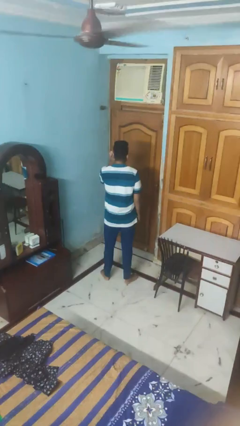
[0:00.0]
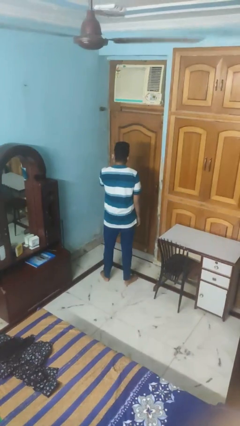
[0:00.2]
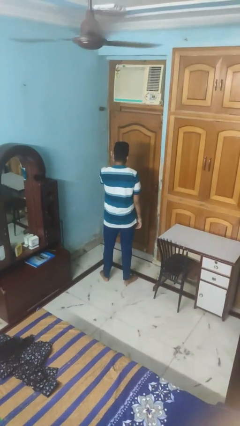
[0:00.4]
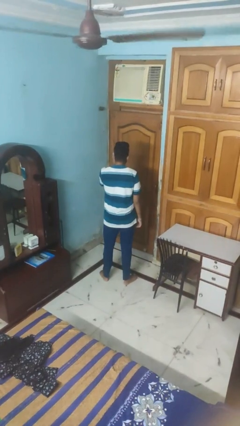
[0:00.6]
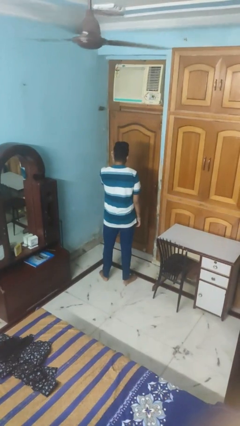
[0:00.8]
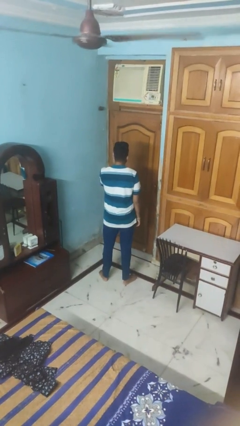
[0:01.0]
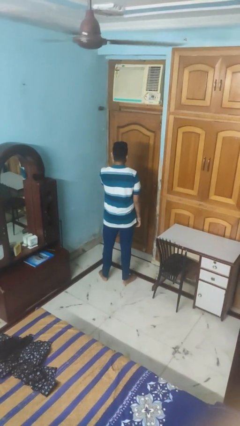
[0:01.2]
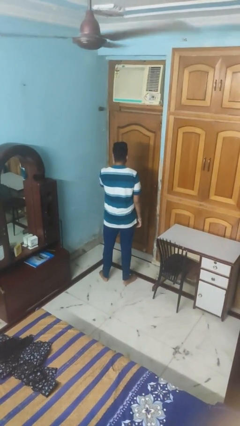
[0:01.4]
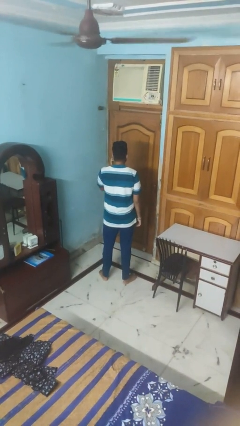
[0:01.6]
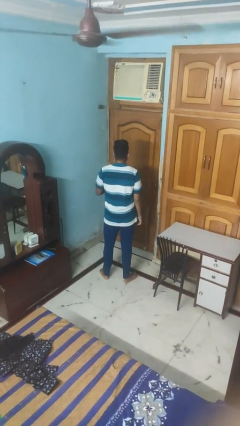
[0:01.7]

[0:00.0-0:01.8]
person touches earlobe

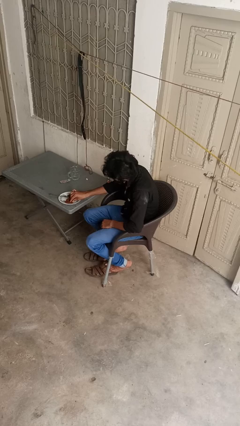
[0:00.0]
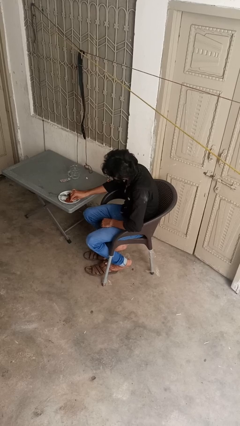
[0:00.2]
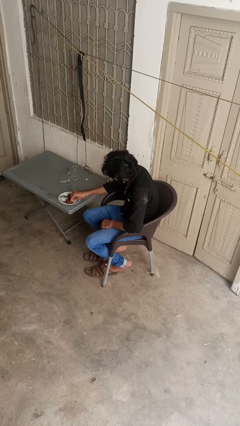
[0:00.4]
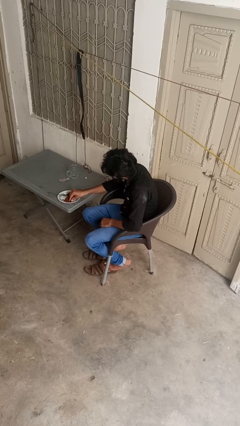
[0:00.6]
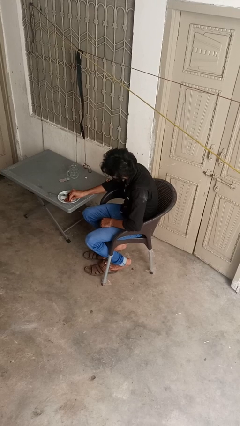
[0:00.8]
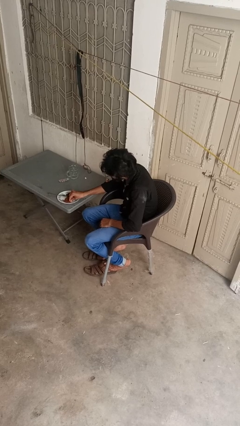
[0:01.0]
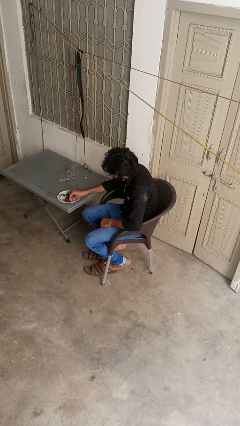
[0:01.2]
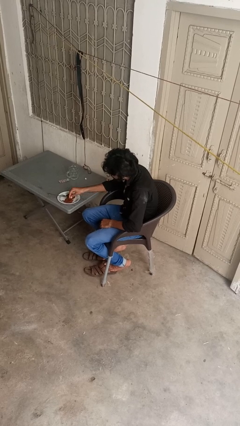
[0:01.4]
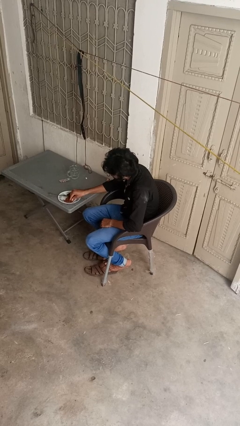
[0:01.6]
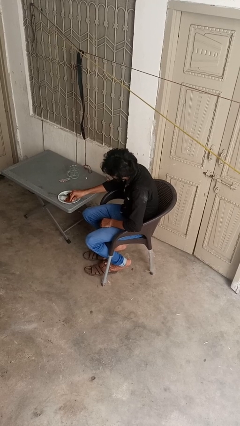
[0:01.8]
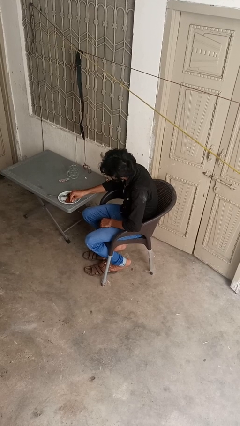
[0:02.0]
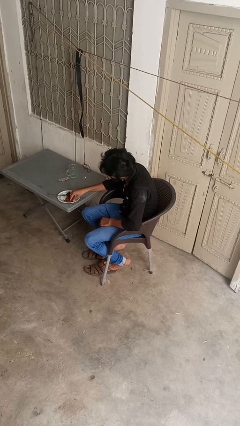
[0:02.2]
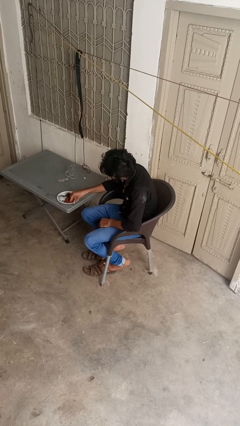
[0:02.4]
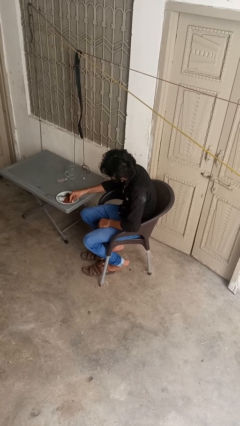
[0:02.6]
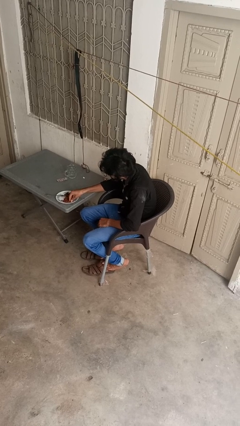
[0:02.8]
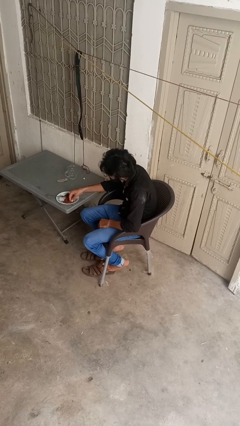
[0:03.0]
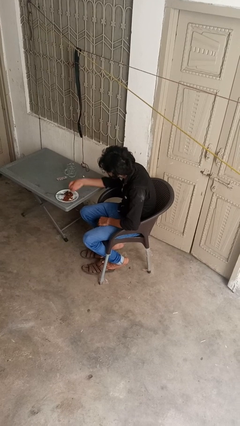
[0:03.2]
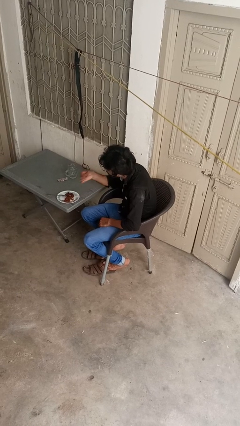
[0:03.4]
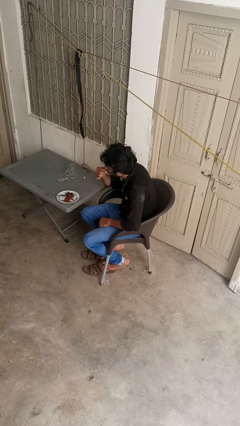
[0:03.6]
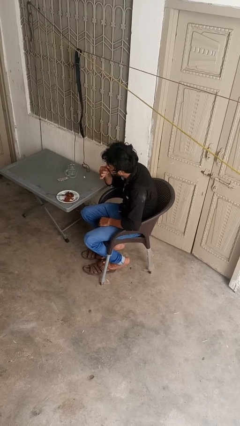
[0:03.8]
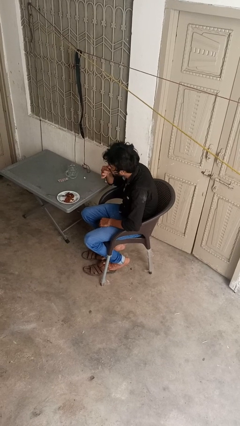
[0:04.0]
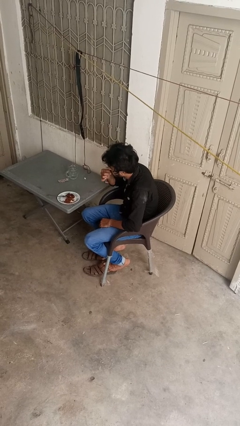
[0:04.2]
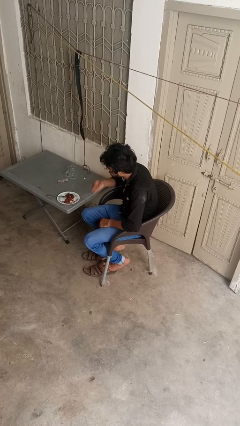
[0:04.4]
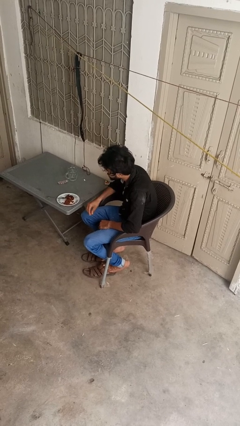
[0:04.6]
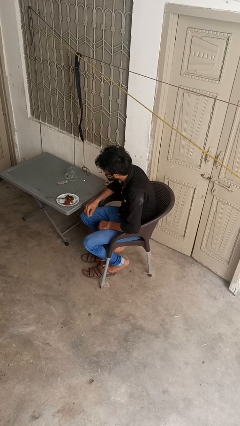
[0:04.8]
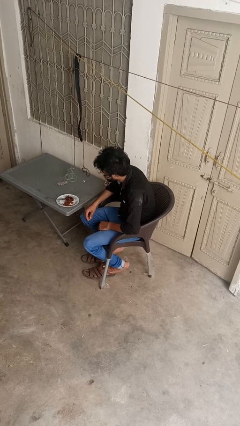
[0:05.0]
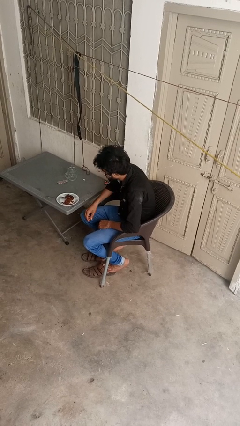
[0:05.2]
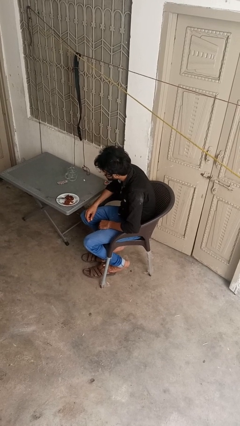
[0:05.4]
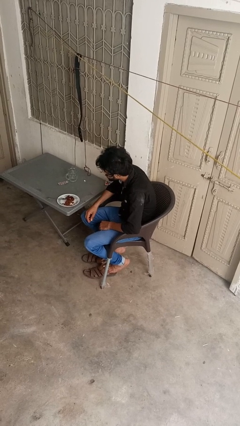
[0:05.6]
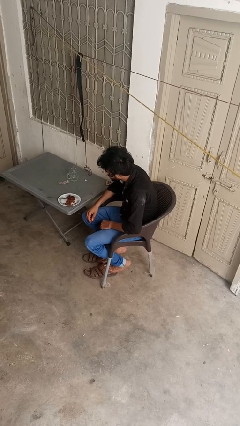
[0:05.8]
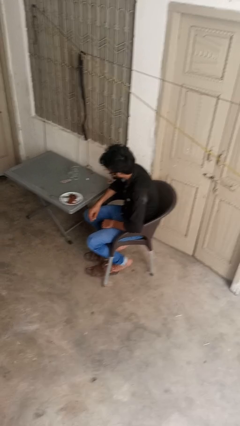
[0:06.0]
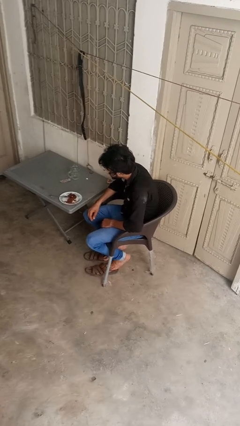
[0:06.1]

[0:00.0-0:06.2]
person eats with hands

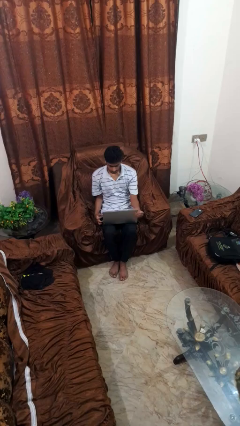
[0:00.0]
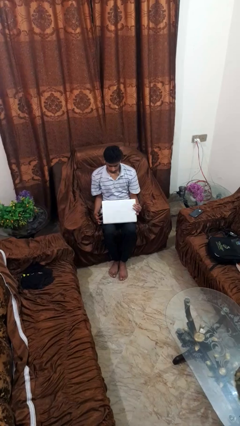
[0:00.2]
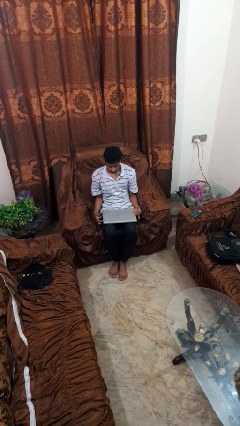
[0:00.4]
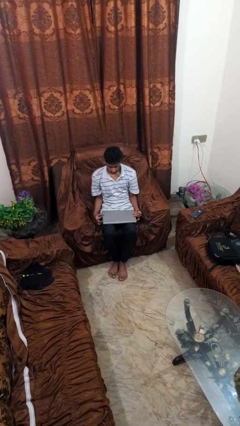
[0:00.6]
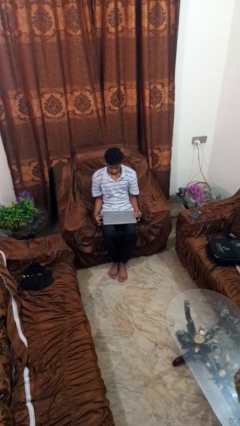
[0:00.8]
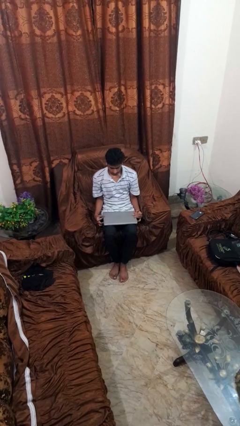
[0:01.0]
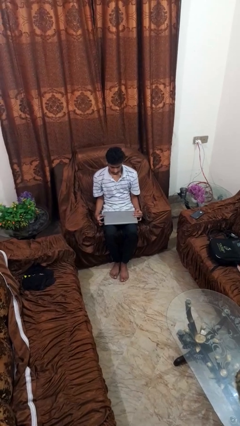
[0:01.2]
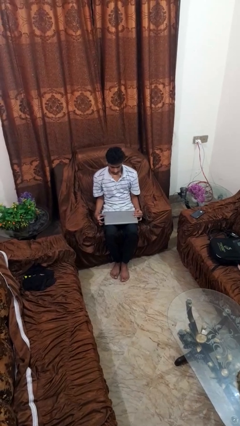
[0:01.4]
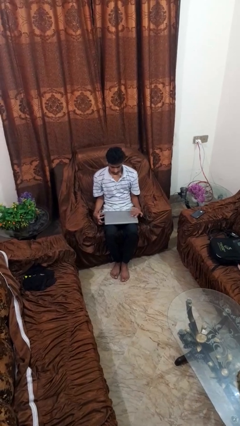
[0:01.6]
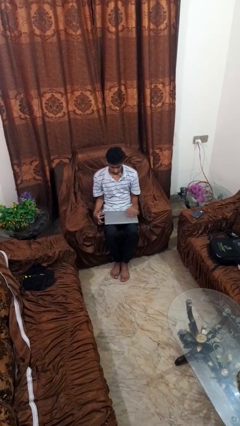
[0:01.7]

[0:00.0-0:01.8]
person closes laptop

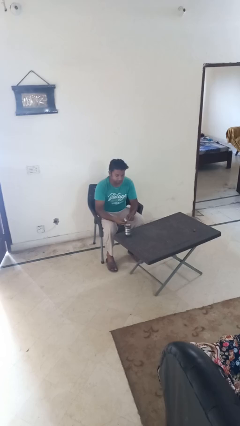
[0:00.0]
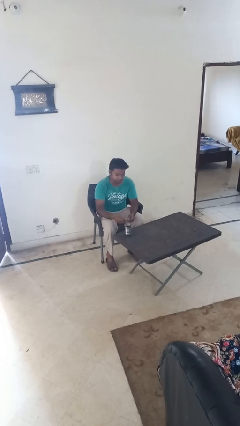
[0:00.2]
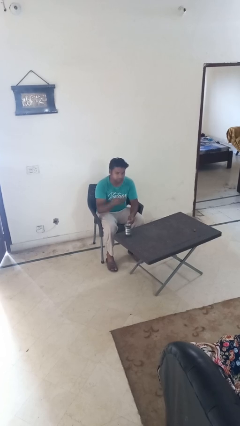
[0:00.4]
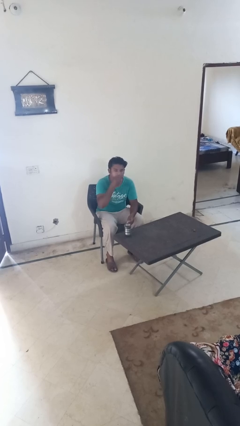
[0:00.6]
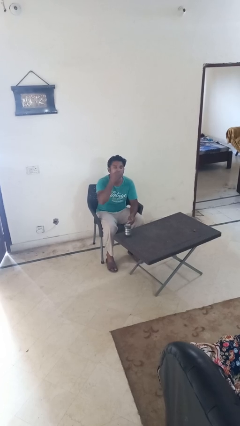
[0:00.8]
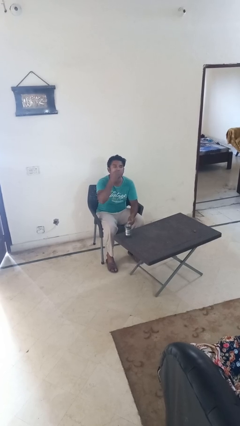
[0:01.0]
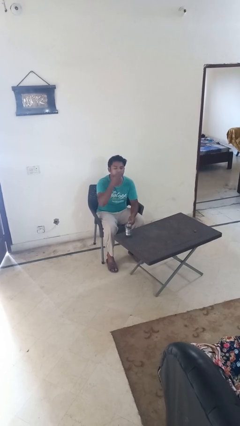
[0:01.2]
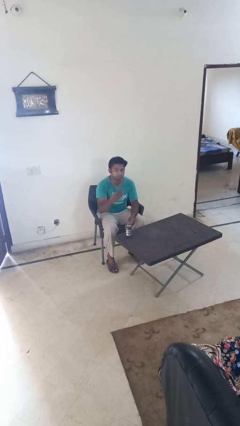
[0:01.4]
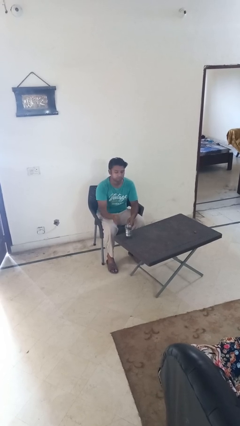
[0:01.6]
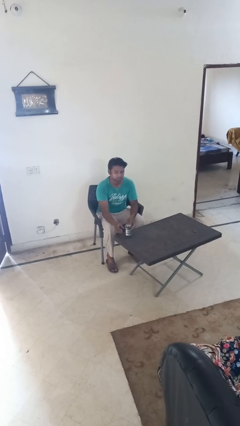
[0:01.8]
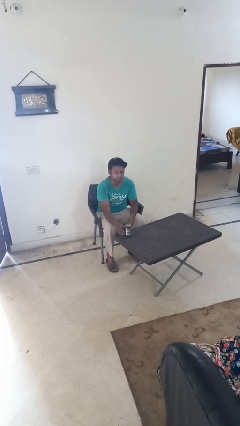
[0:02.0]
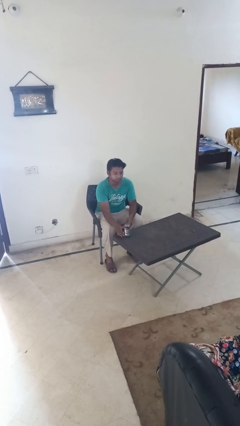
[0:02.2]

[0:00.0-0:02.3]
person takes medicine pills

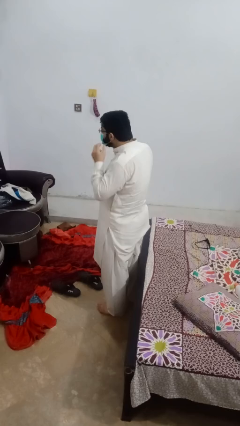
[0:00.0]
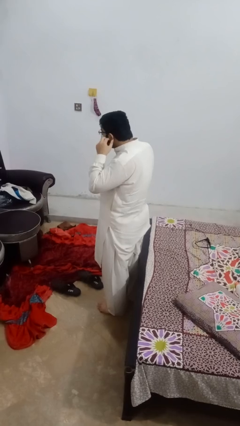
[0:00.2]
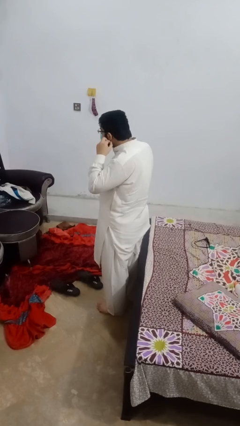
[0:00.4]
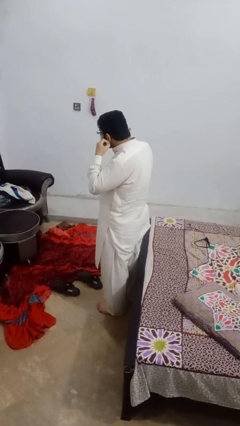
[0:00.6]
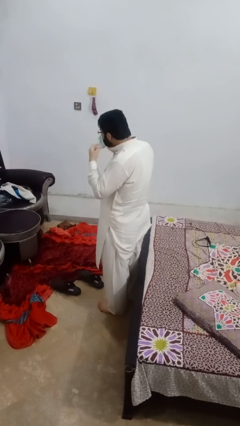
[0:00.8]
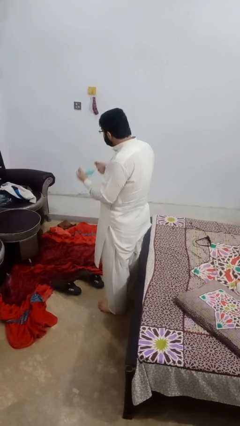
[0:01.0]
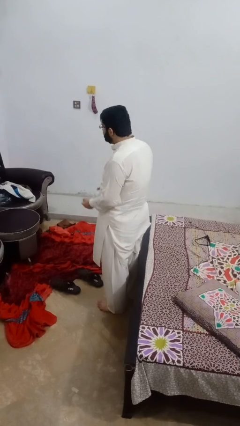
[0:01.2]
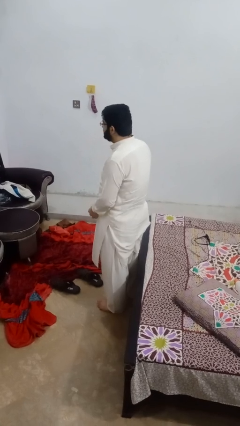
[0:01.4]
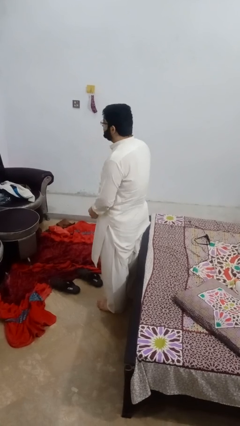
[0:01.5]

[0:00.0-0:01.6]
person takes off facemask

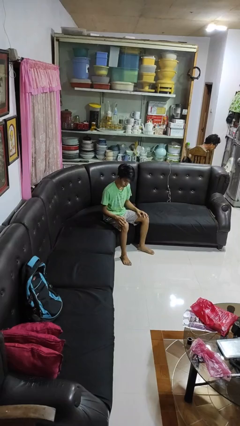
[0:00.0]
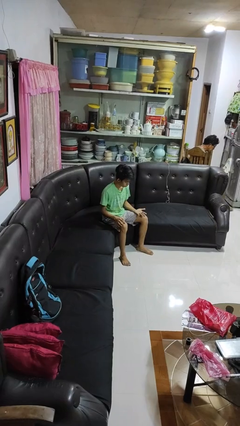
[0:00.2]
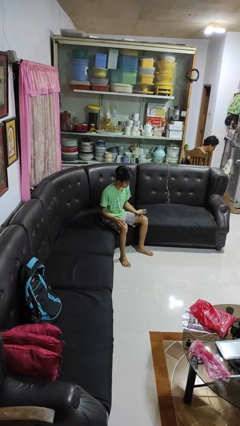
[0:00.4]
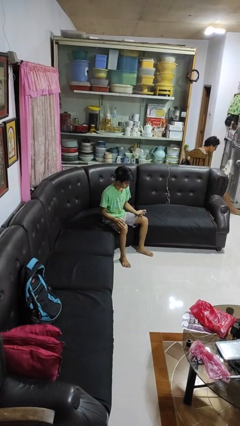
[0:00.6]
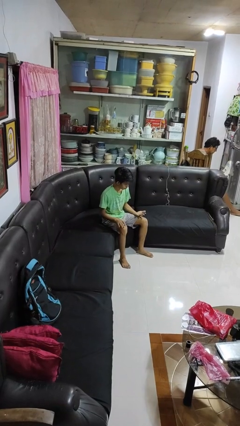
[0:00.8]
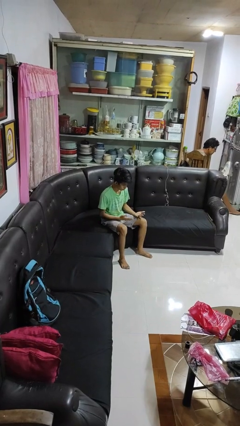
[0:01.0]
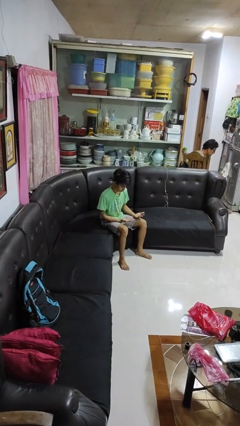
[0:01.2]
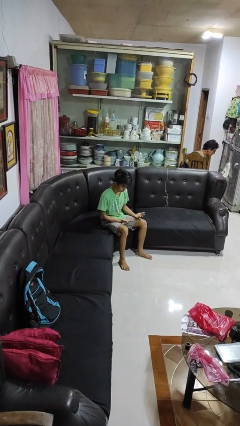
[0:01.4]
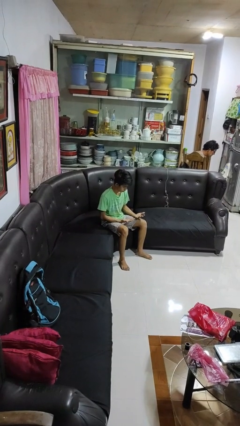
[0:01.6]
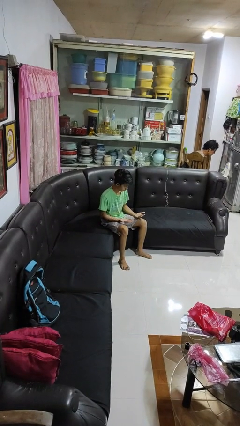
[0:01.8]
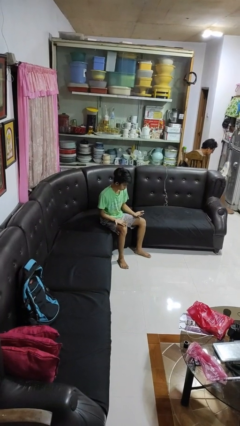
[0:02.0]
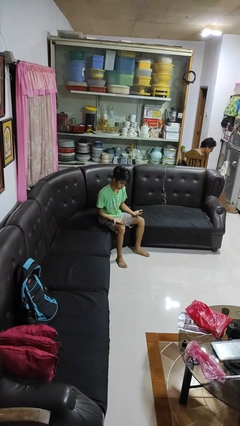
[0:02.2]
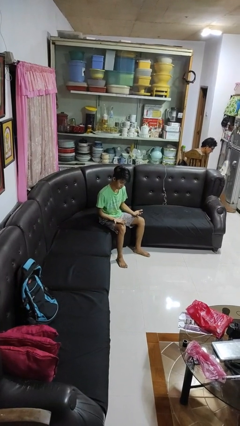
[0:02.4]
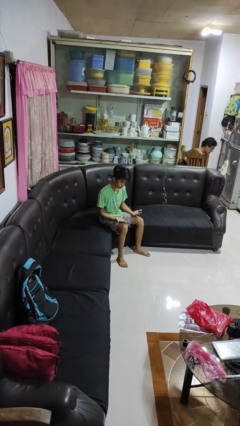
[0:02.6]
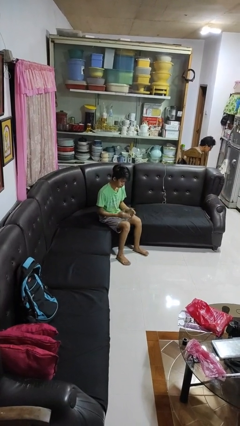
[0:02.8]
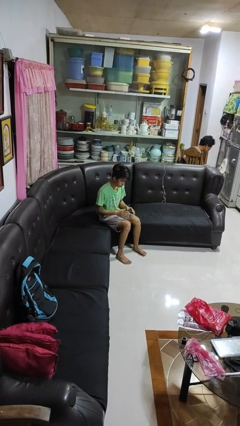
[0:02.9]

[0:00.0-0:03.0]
person looks at hands in lap

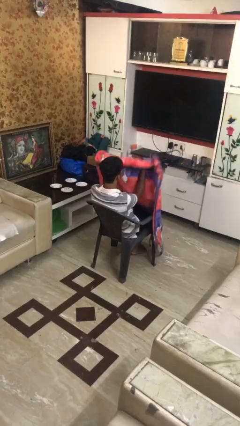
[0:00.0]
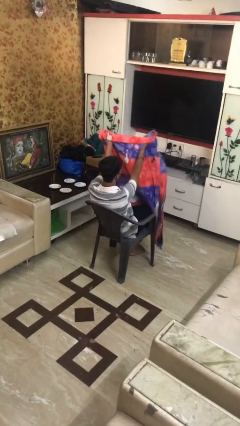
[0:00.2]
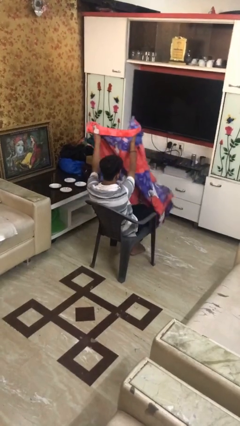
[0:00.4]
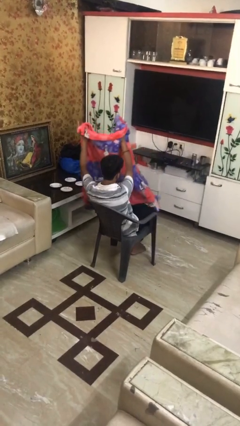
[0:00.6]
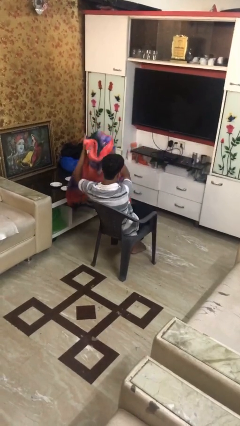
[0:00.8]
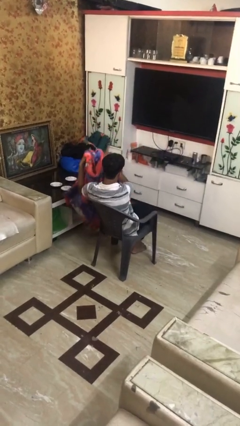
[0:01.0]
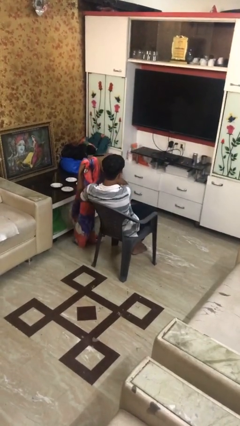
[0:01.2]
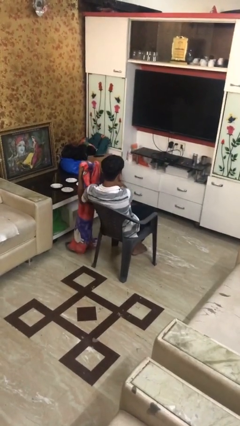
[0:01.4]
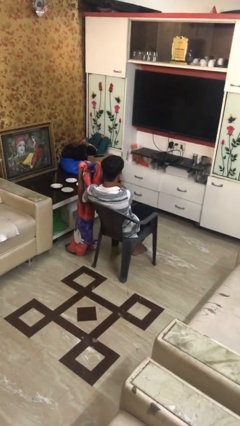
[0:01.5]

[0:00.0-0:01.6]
person uncovers with blanket
